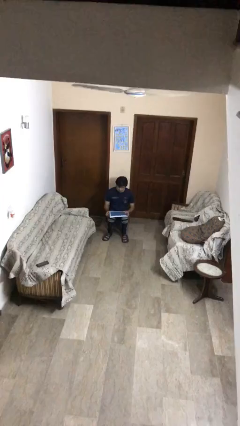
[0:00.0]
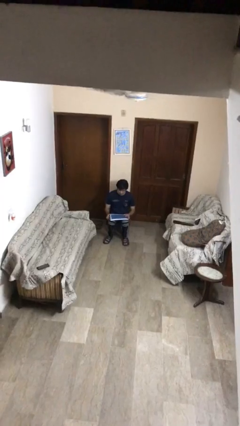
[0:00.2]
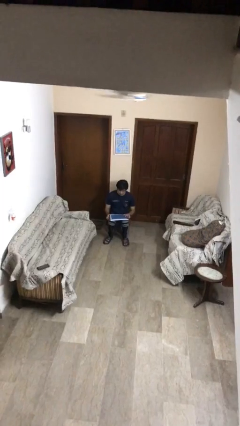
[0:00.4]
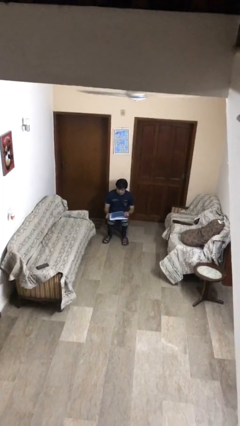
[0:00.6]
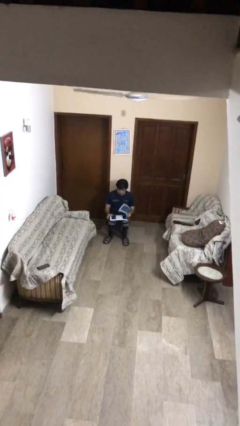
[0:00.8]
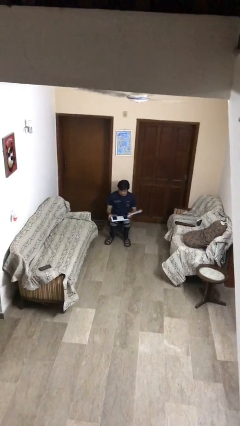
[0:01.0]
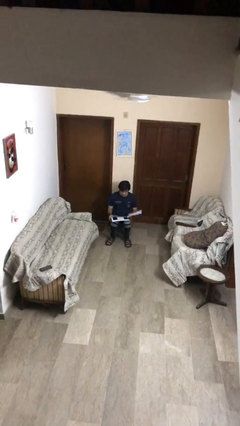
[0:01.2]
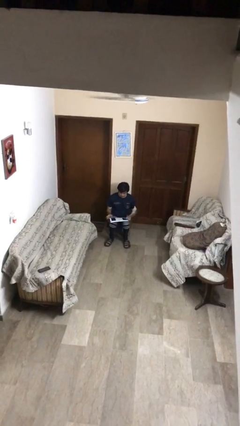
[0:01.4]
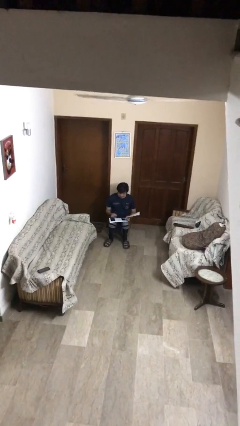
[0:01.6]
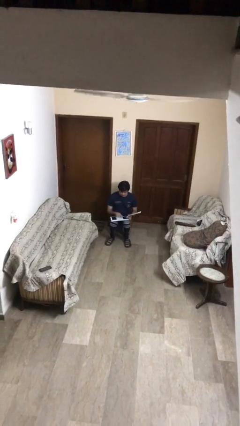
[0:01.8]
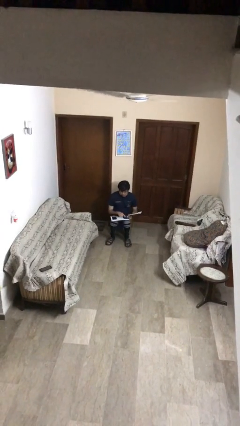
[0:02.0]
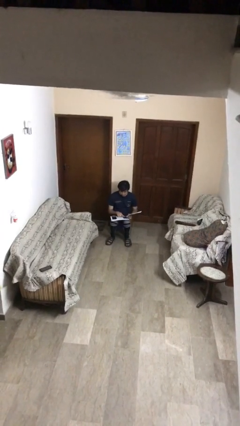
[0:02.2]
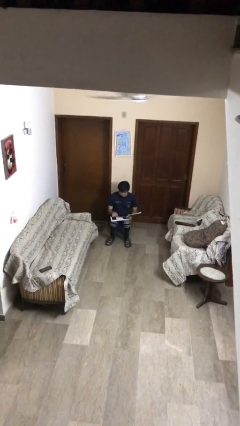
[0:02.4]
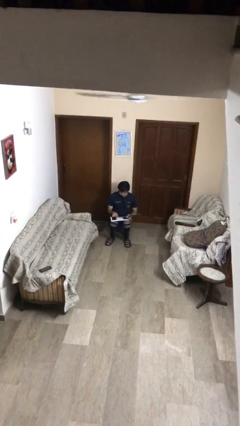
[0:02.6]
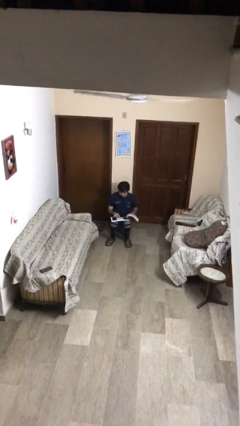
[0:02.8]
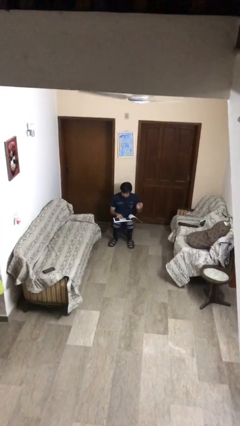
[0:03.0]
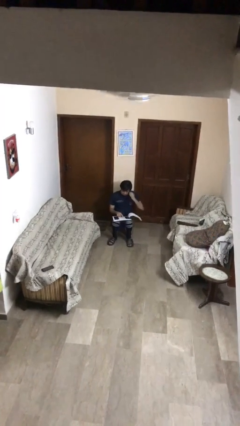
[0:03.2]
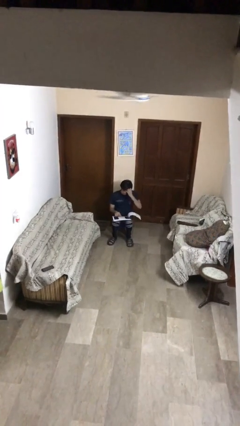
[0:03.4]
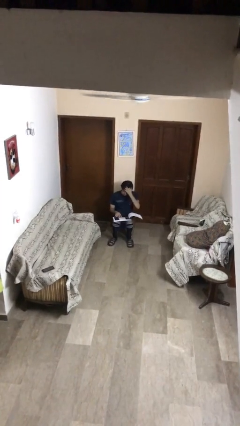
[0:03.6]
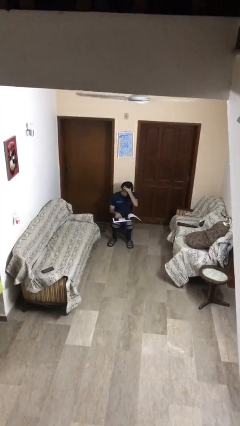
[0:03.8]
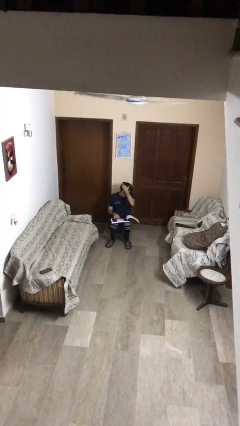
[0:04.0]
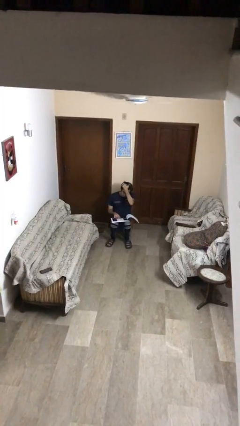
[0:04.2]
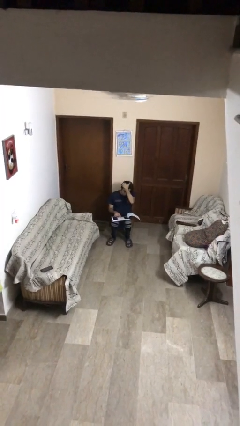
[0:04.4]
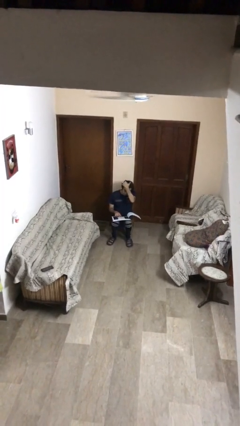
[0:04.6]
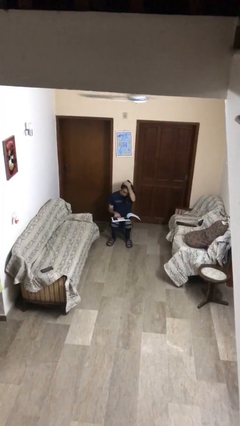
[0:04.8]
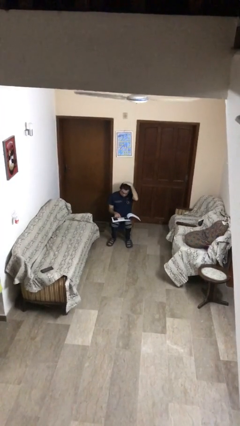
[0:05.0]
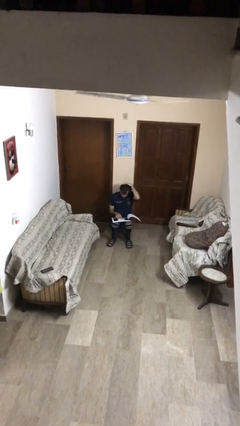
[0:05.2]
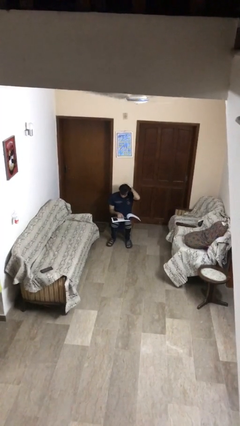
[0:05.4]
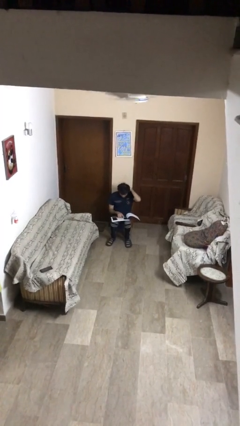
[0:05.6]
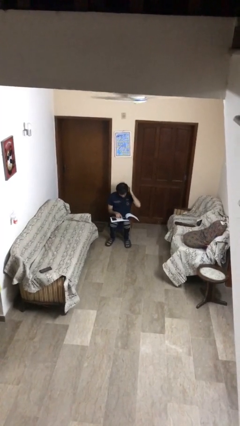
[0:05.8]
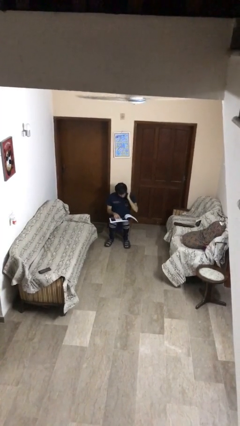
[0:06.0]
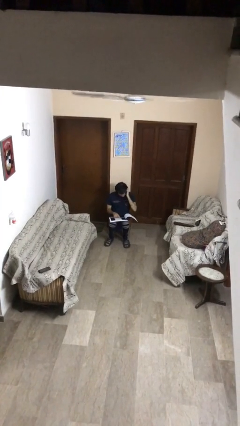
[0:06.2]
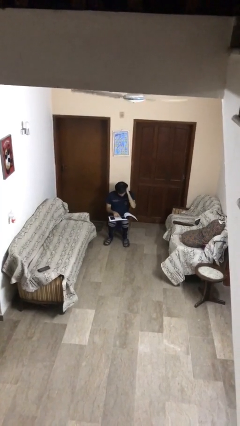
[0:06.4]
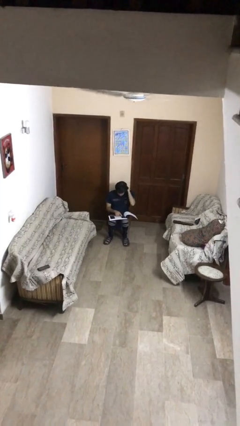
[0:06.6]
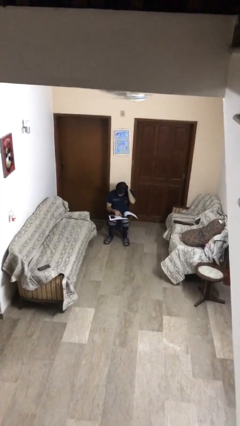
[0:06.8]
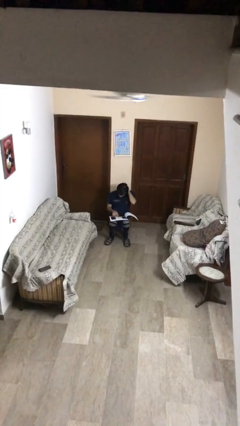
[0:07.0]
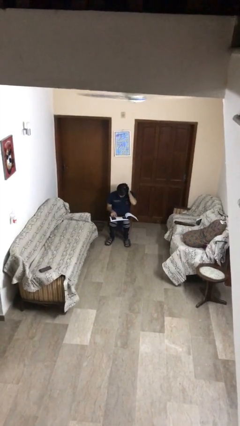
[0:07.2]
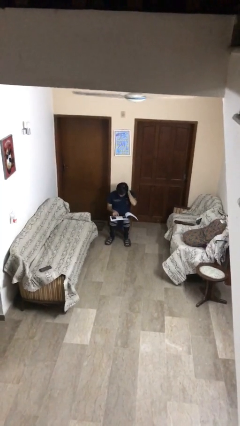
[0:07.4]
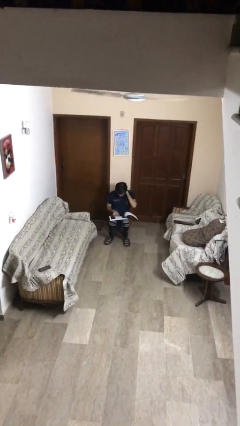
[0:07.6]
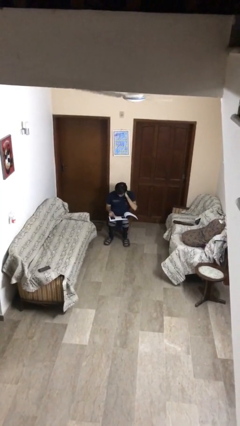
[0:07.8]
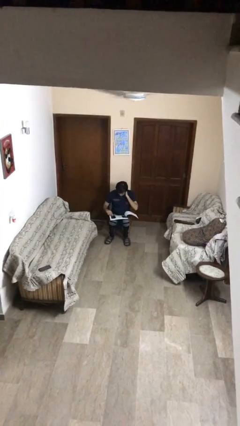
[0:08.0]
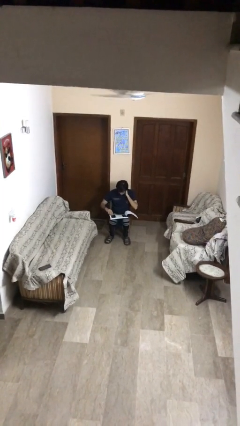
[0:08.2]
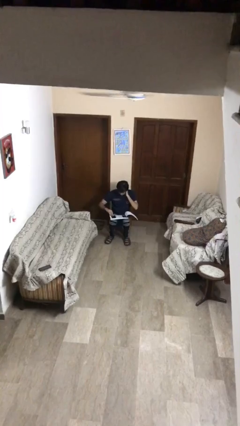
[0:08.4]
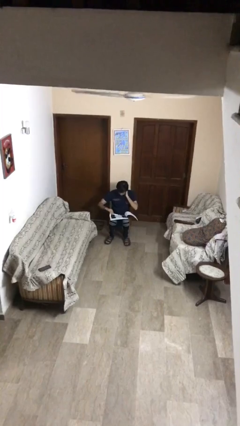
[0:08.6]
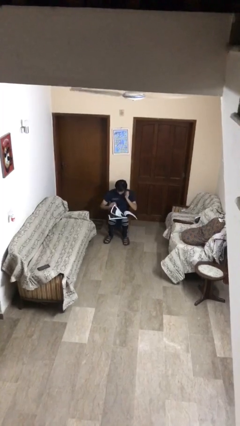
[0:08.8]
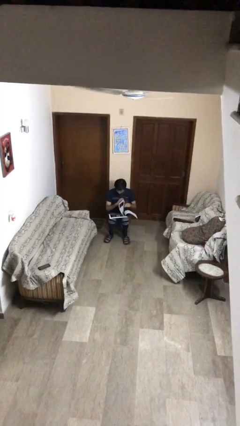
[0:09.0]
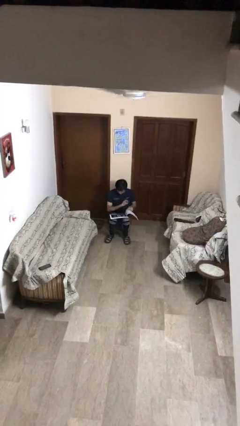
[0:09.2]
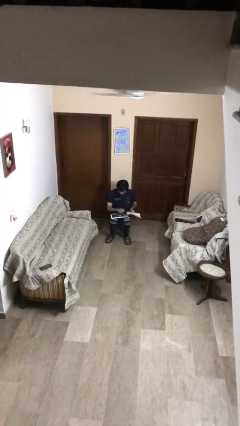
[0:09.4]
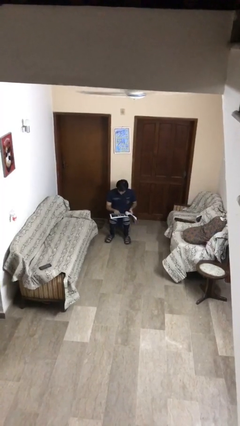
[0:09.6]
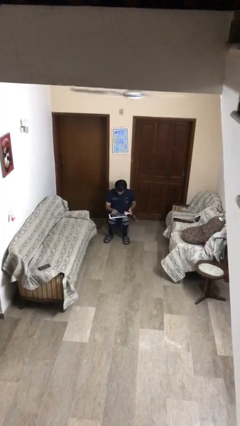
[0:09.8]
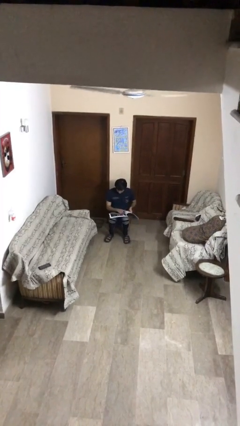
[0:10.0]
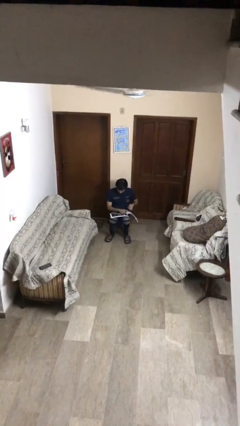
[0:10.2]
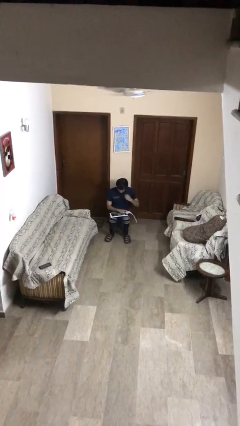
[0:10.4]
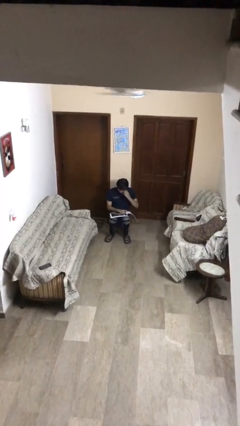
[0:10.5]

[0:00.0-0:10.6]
person reads document

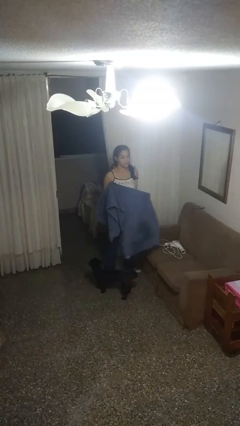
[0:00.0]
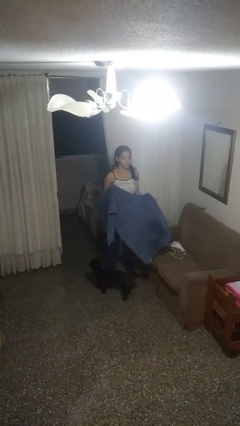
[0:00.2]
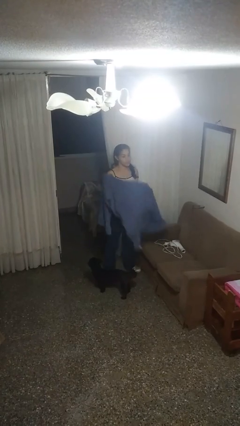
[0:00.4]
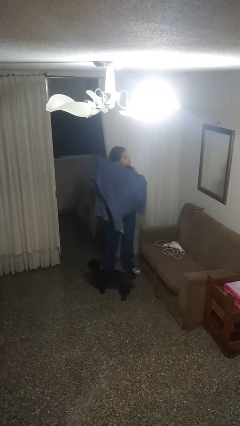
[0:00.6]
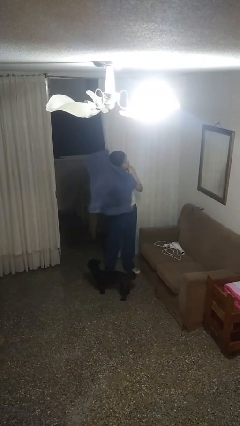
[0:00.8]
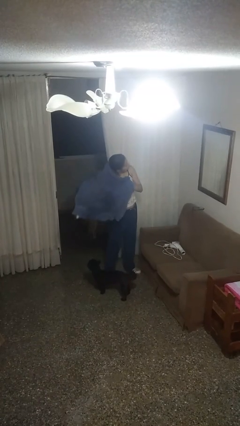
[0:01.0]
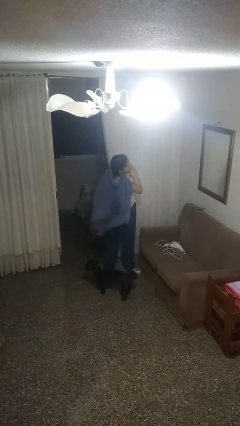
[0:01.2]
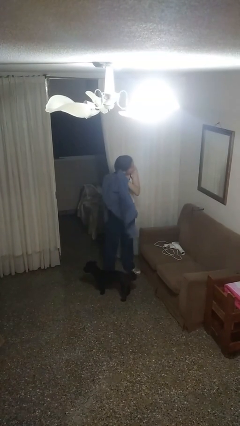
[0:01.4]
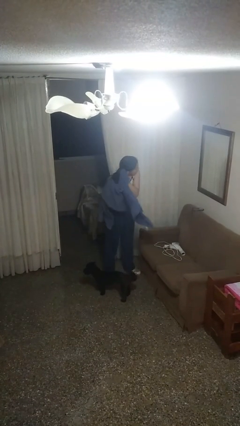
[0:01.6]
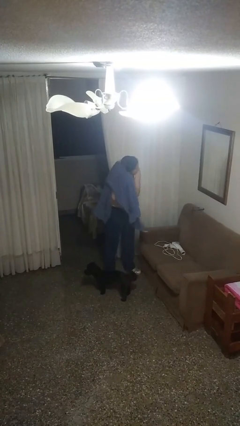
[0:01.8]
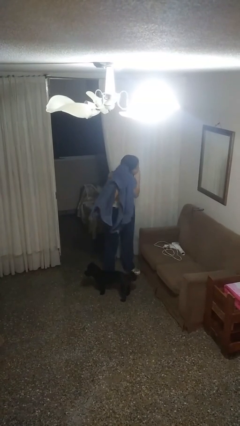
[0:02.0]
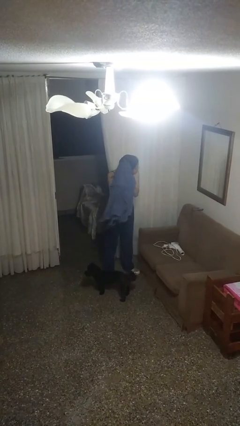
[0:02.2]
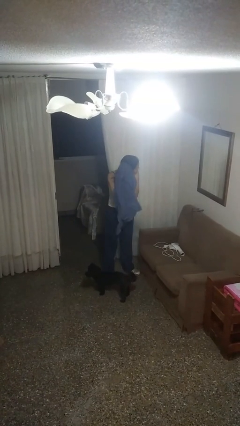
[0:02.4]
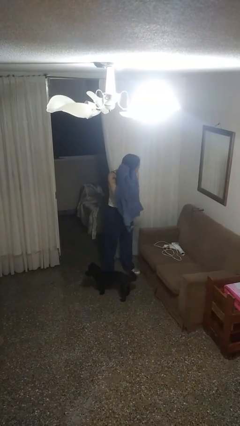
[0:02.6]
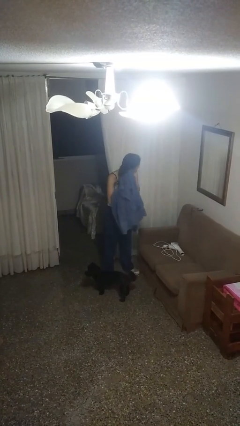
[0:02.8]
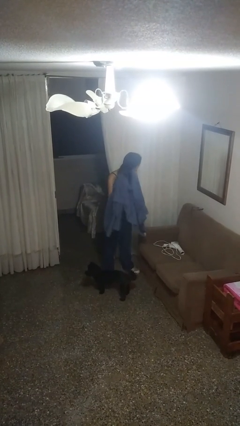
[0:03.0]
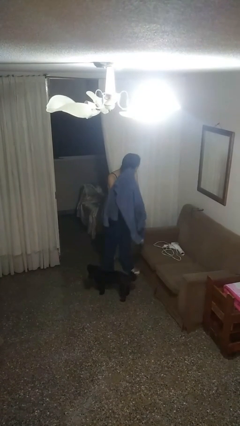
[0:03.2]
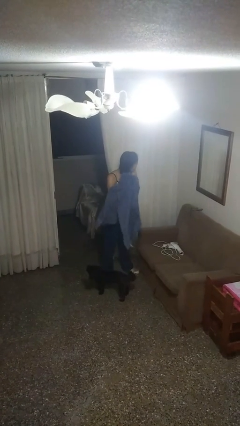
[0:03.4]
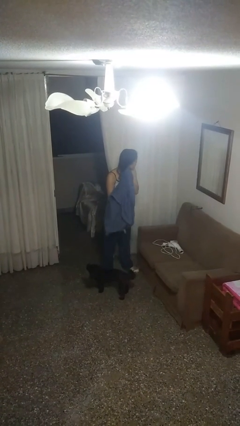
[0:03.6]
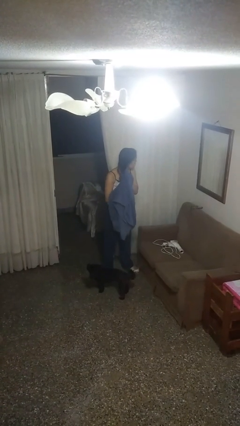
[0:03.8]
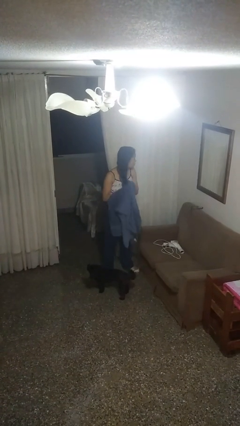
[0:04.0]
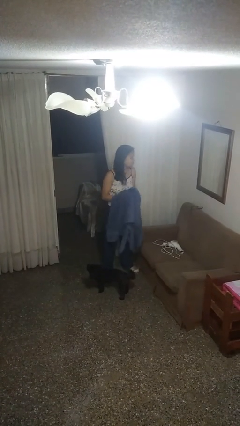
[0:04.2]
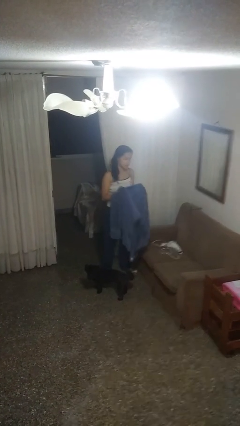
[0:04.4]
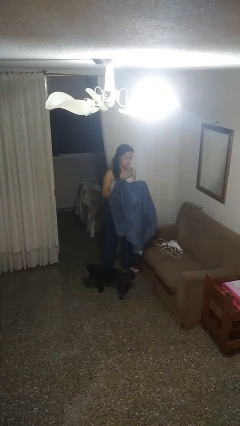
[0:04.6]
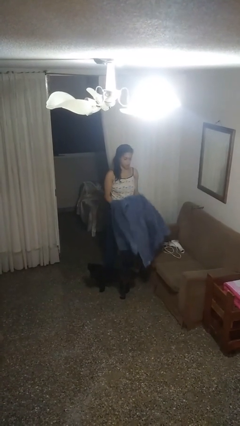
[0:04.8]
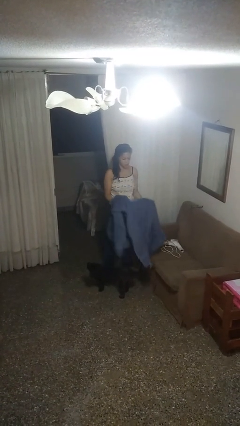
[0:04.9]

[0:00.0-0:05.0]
person dries hair with towel

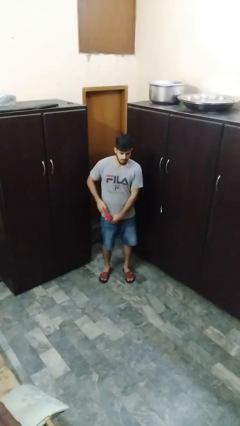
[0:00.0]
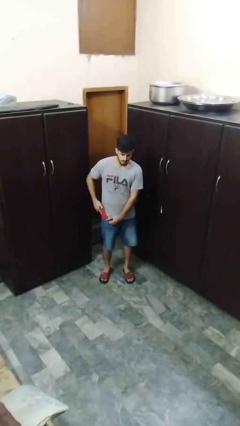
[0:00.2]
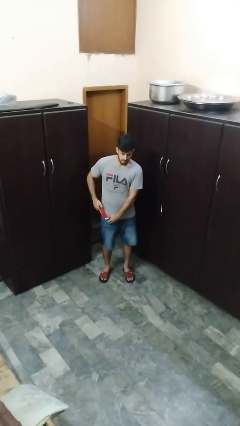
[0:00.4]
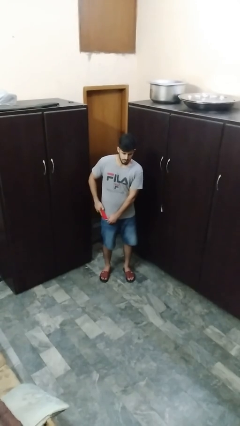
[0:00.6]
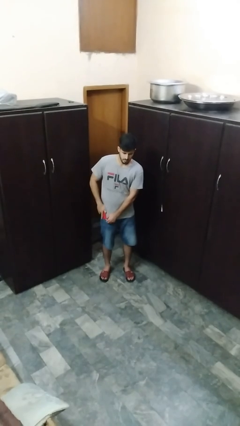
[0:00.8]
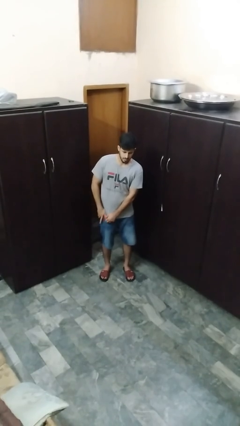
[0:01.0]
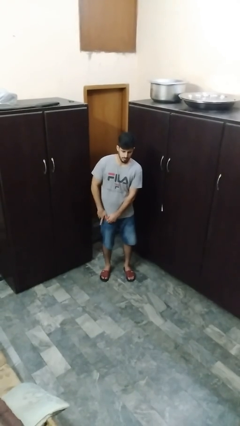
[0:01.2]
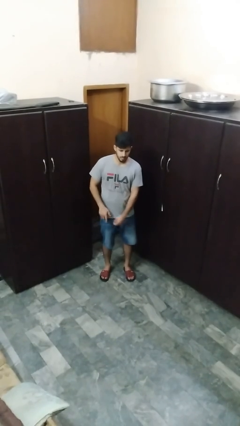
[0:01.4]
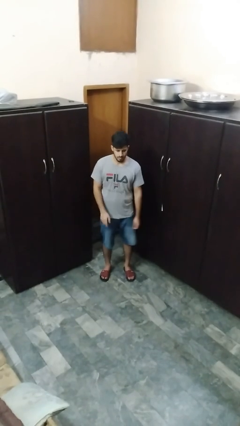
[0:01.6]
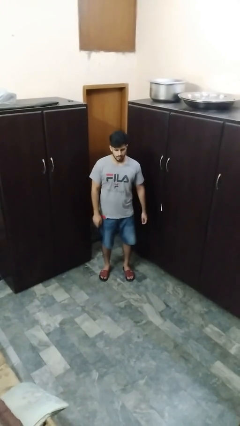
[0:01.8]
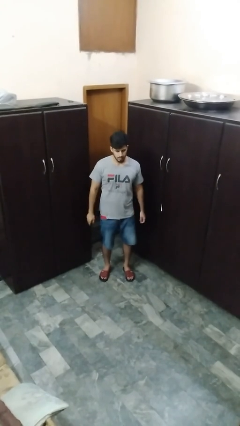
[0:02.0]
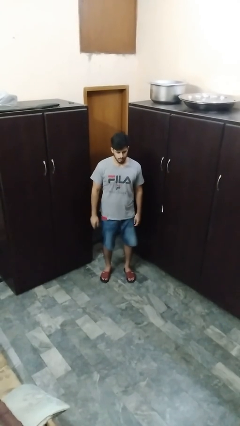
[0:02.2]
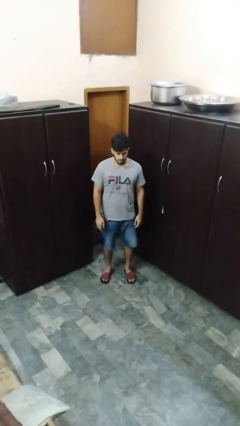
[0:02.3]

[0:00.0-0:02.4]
person puts phone into pocket
